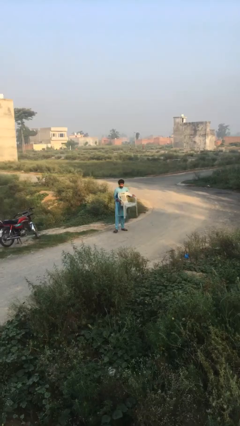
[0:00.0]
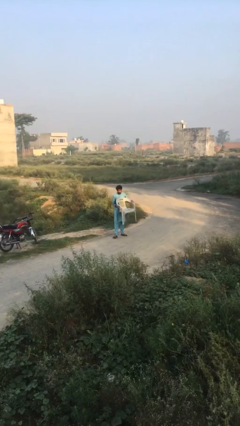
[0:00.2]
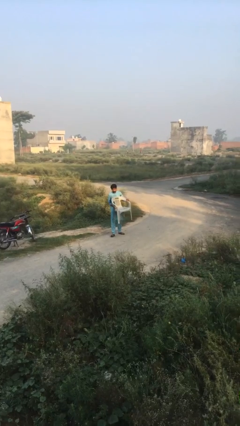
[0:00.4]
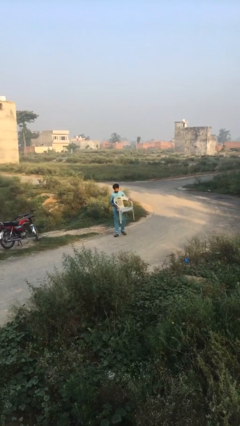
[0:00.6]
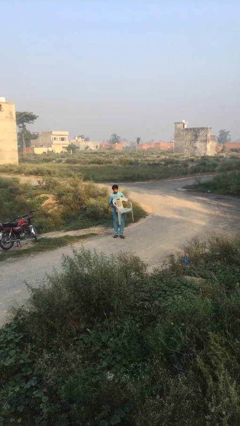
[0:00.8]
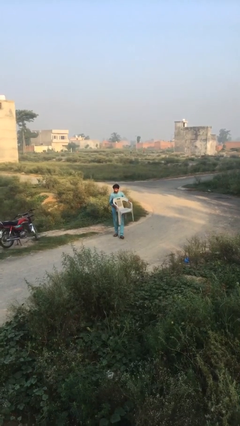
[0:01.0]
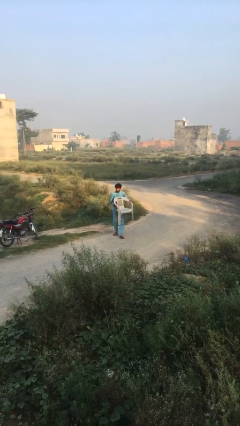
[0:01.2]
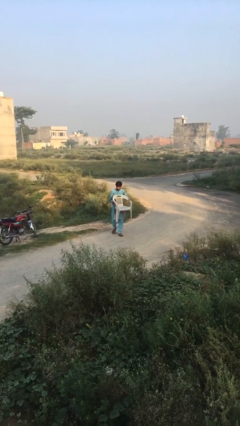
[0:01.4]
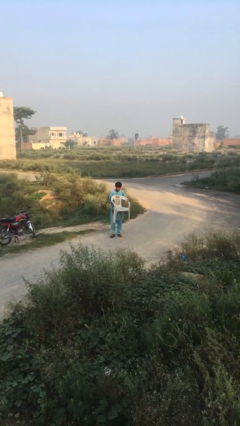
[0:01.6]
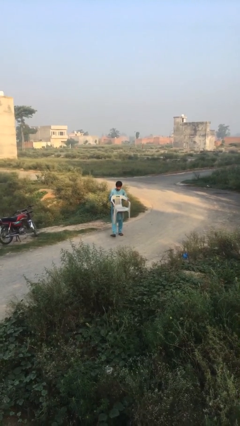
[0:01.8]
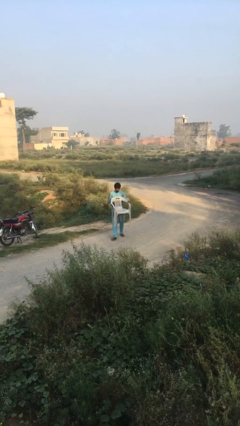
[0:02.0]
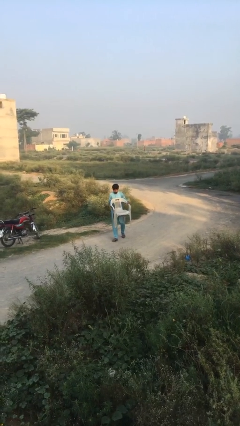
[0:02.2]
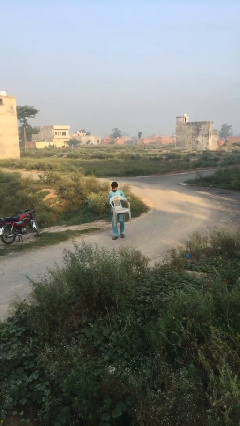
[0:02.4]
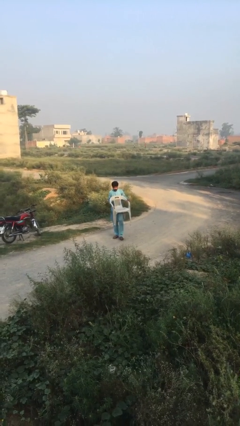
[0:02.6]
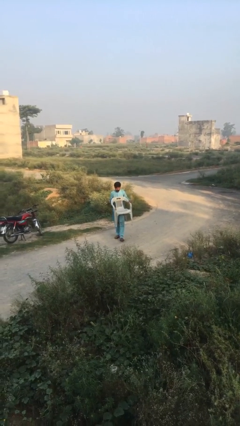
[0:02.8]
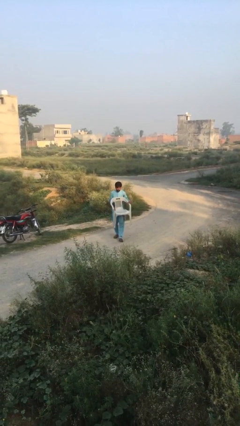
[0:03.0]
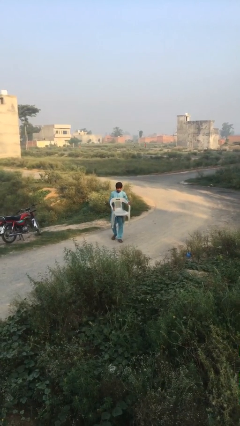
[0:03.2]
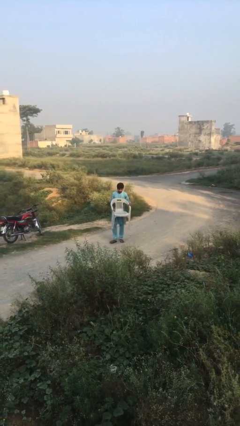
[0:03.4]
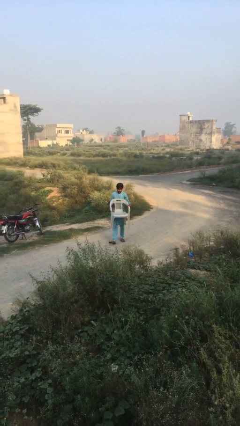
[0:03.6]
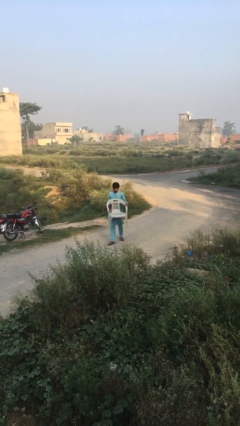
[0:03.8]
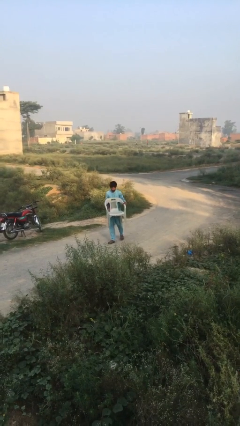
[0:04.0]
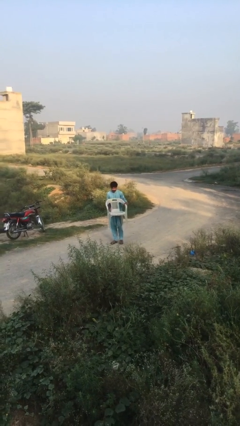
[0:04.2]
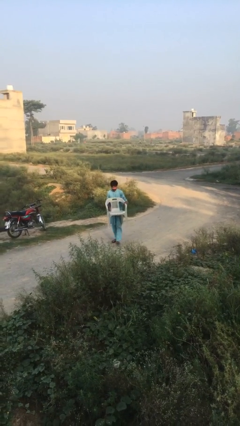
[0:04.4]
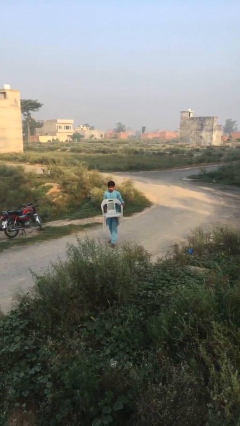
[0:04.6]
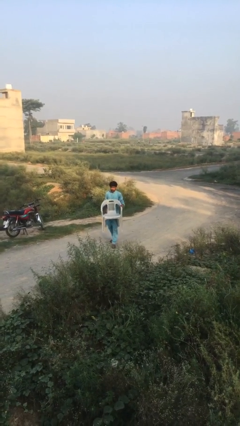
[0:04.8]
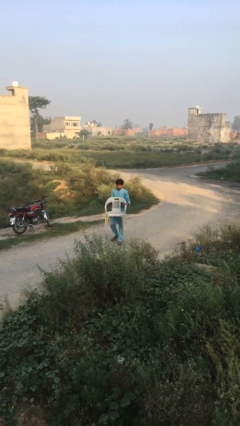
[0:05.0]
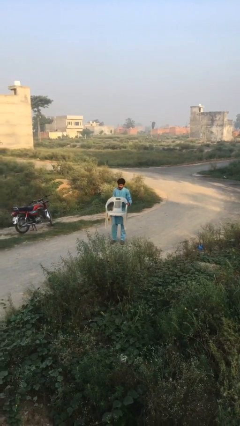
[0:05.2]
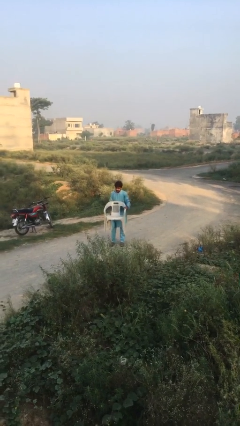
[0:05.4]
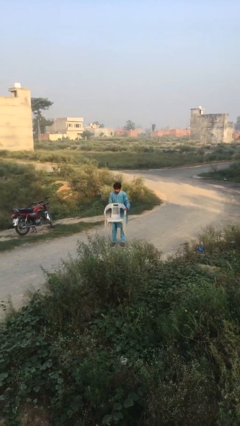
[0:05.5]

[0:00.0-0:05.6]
person carries heavy object

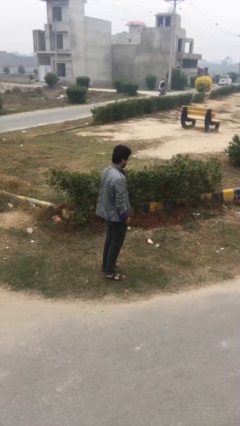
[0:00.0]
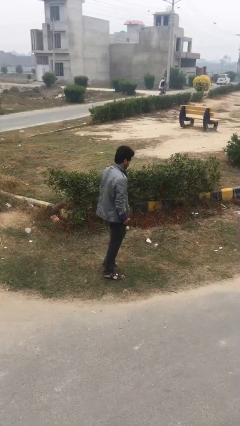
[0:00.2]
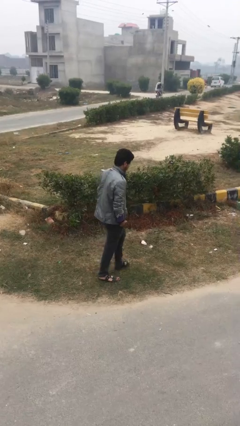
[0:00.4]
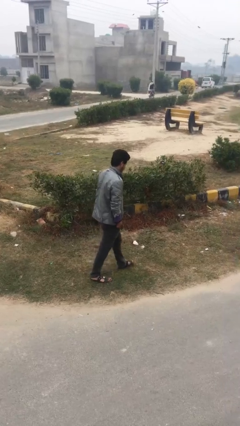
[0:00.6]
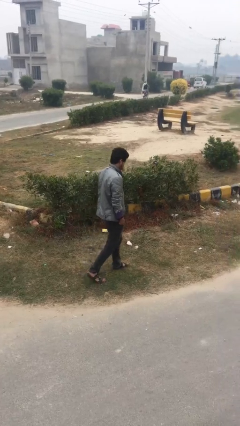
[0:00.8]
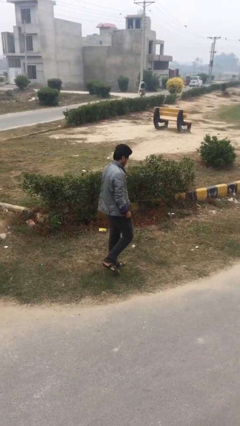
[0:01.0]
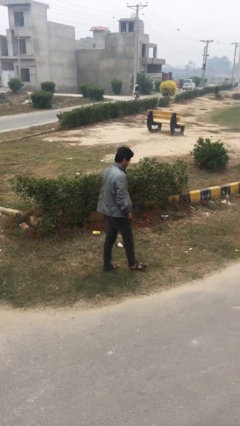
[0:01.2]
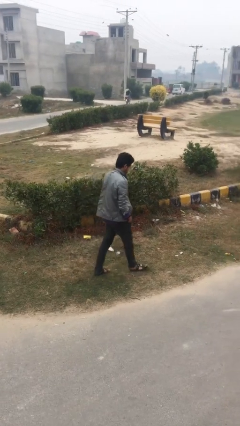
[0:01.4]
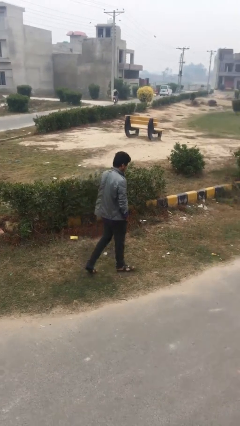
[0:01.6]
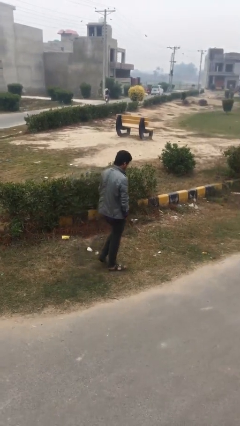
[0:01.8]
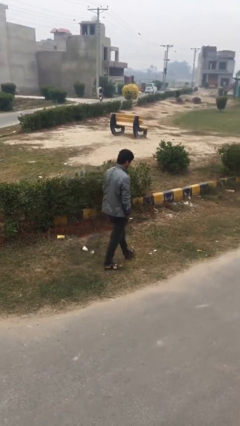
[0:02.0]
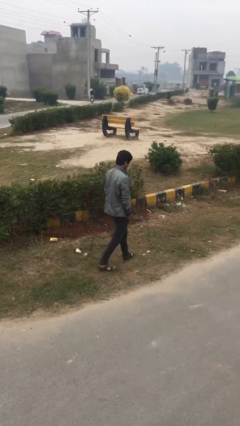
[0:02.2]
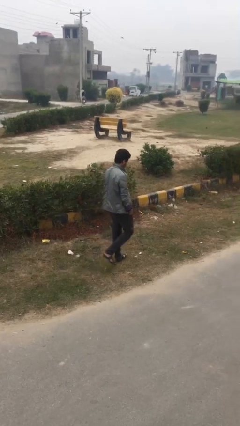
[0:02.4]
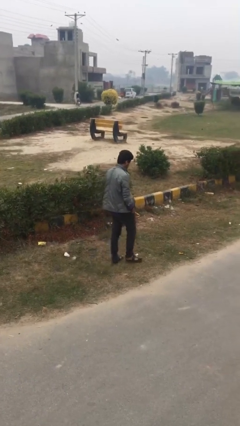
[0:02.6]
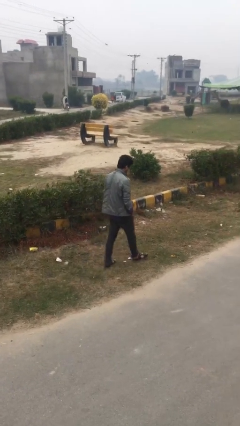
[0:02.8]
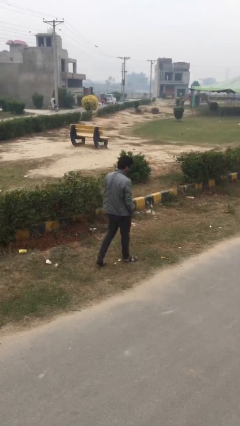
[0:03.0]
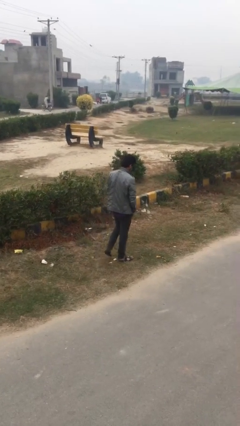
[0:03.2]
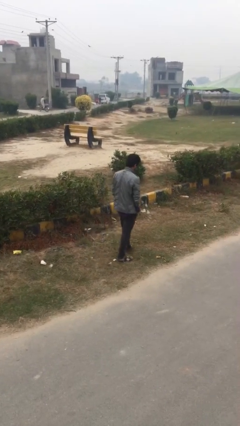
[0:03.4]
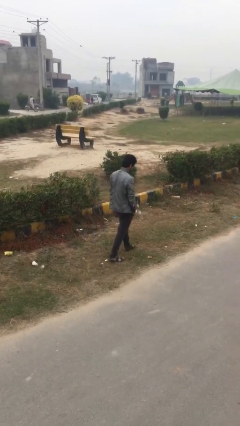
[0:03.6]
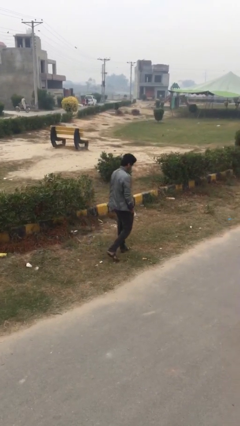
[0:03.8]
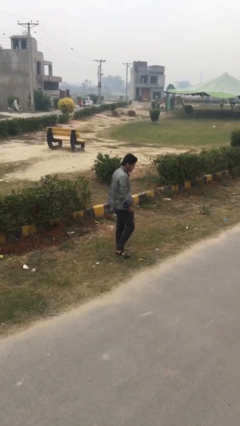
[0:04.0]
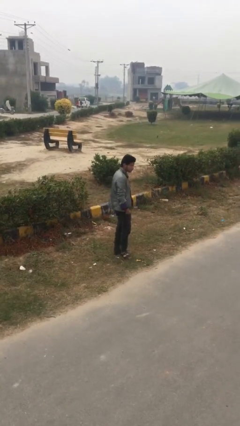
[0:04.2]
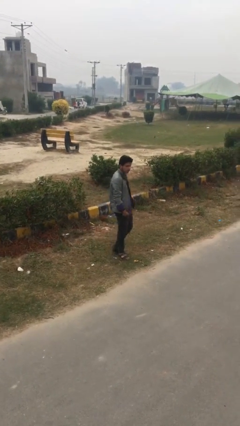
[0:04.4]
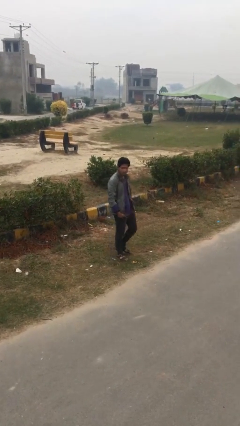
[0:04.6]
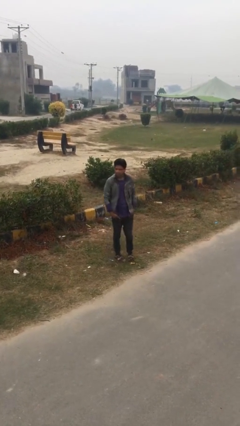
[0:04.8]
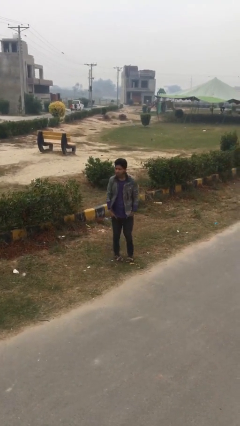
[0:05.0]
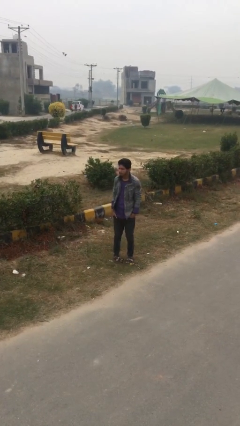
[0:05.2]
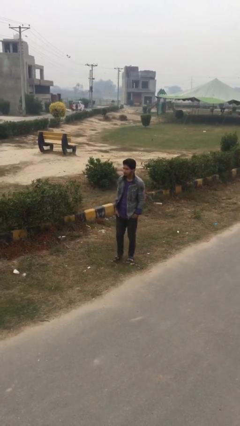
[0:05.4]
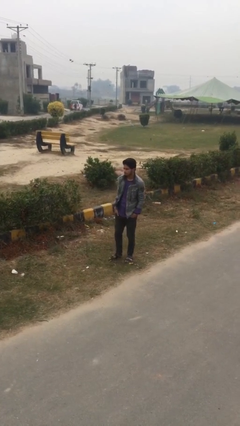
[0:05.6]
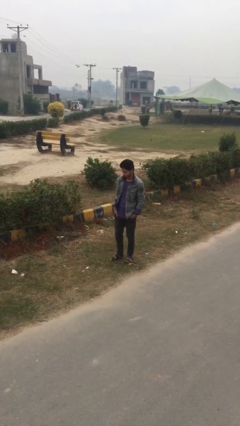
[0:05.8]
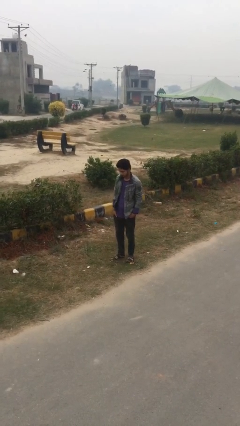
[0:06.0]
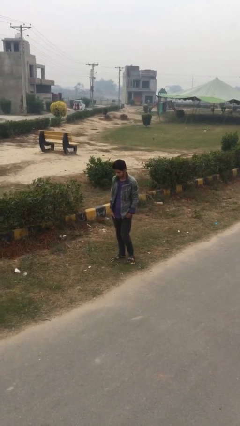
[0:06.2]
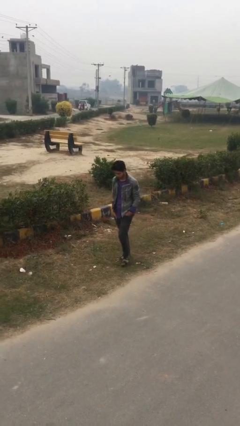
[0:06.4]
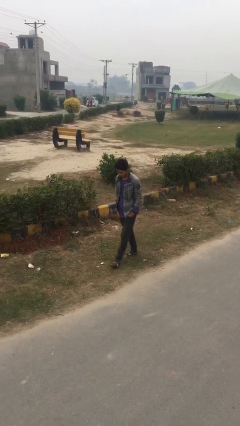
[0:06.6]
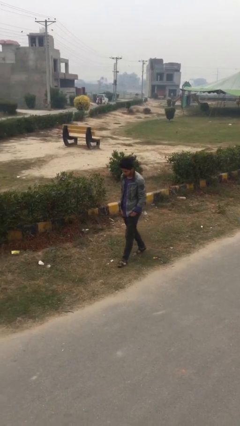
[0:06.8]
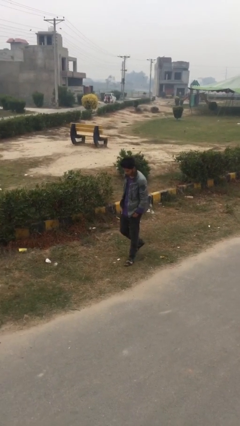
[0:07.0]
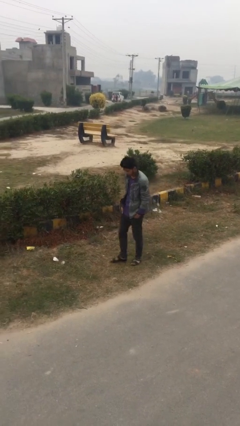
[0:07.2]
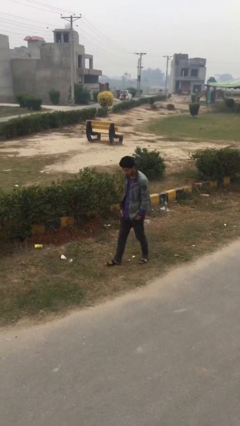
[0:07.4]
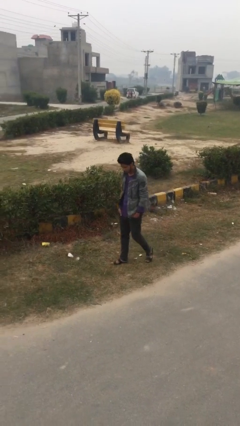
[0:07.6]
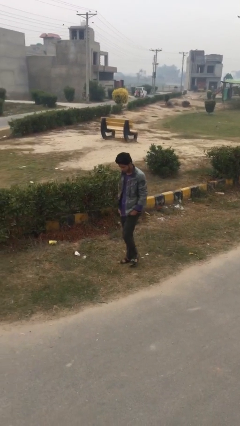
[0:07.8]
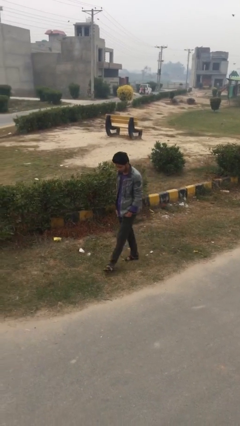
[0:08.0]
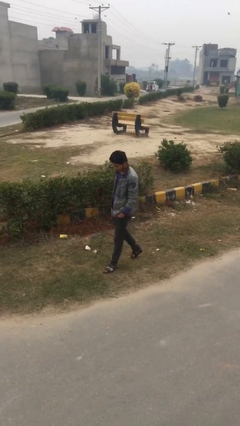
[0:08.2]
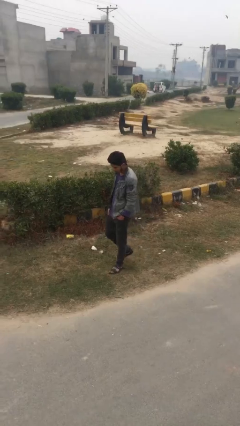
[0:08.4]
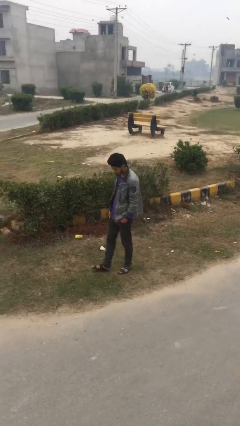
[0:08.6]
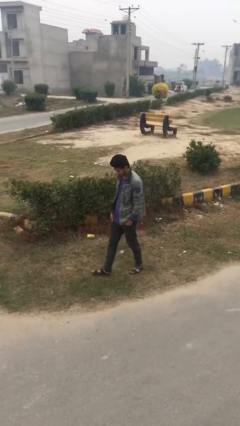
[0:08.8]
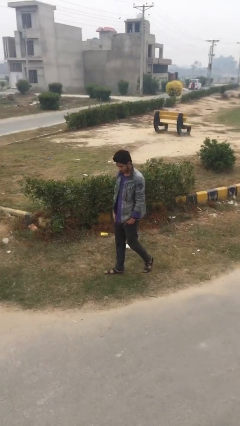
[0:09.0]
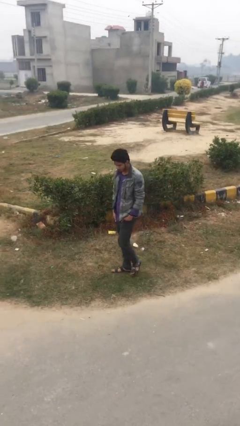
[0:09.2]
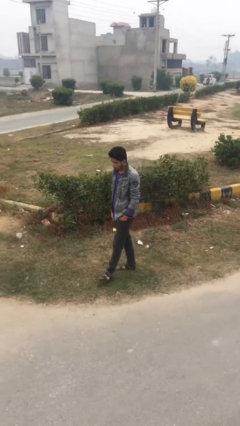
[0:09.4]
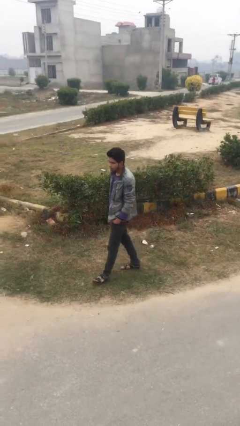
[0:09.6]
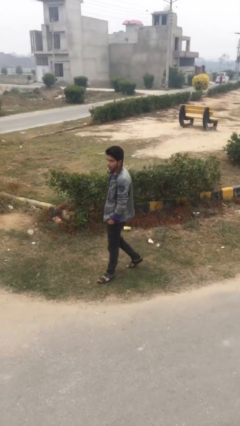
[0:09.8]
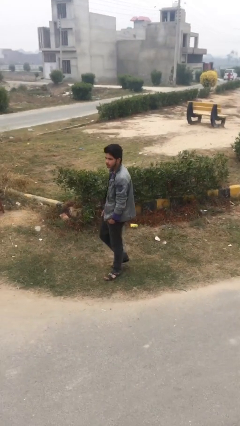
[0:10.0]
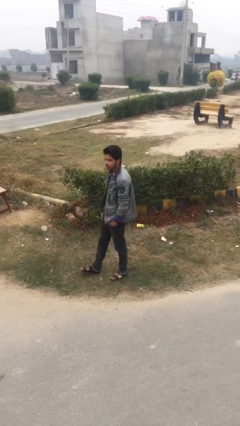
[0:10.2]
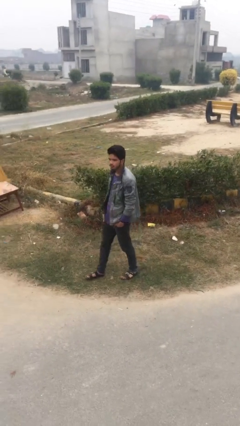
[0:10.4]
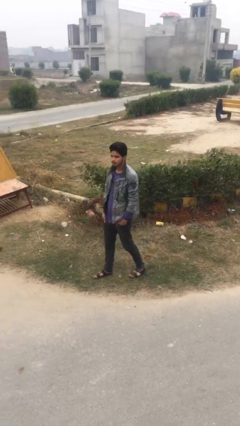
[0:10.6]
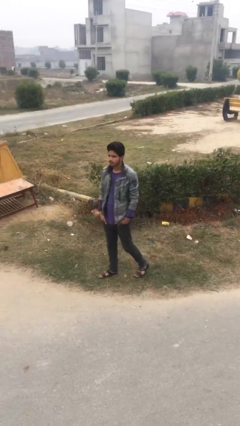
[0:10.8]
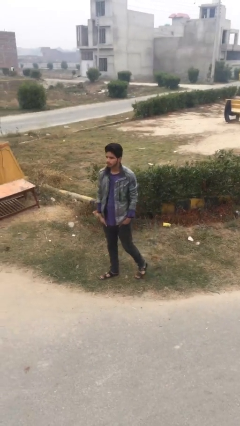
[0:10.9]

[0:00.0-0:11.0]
person walks

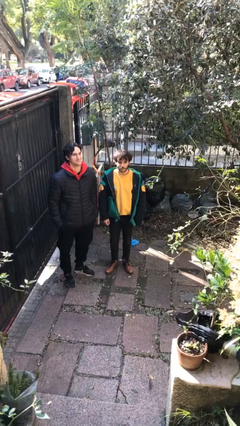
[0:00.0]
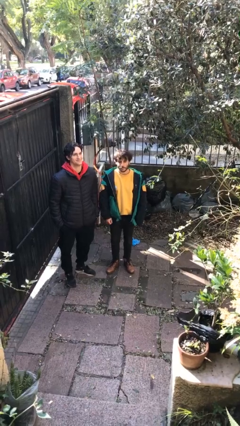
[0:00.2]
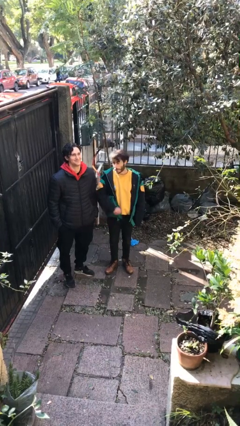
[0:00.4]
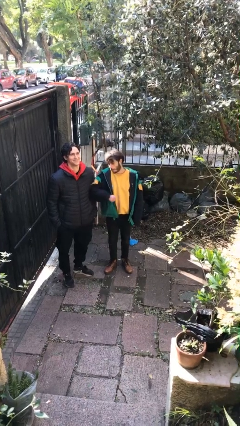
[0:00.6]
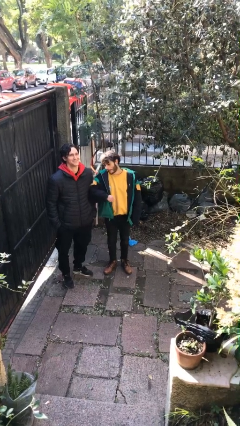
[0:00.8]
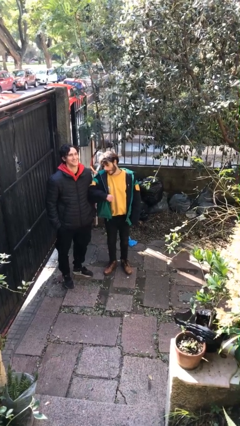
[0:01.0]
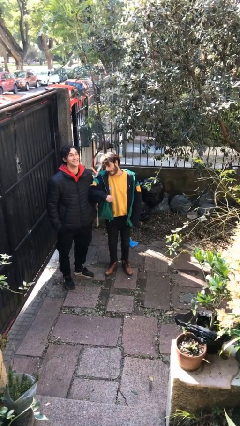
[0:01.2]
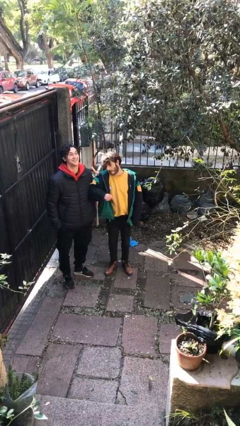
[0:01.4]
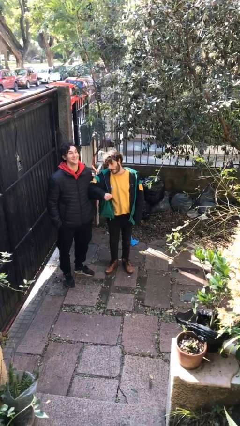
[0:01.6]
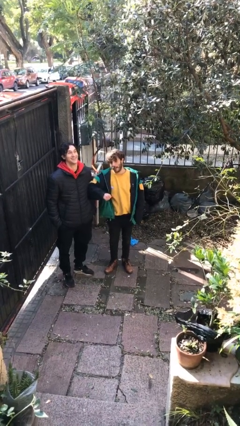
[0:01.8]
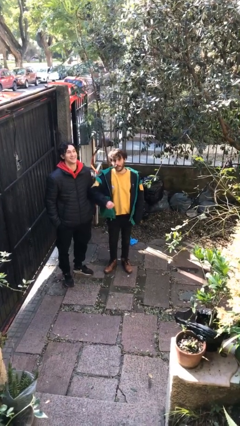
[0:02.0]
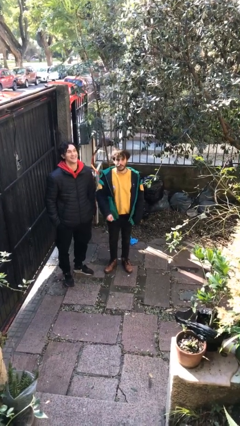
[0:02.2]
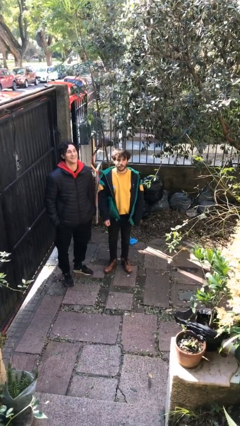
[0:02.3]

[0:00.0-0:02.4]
person nudges person with elbow
